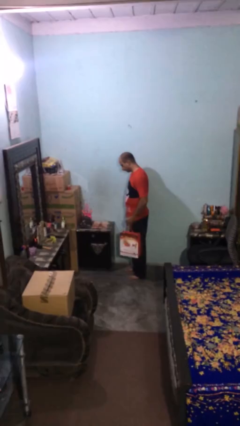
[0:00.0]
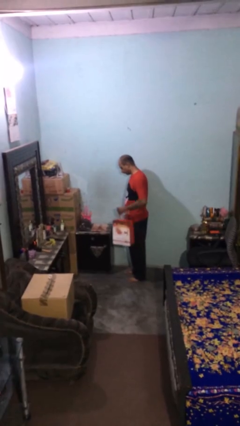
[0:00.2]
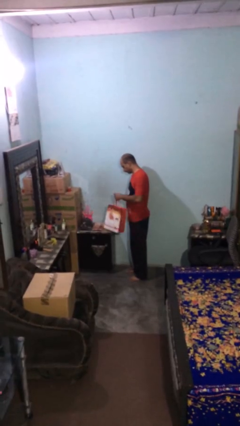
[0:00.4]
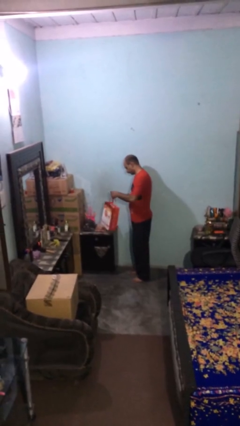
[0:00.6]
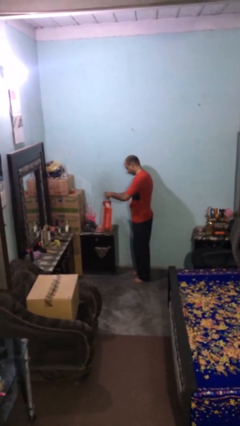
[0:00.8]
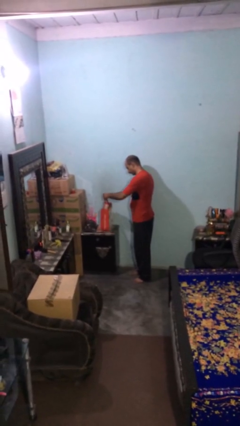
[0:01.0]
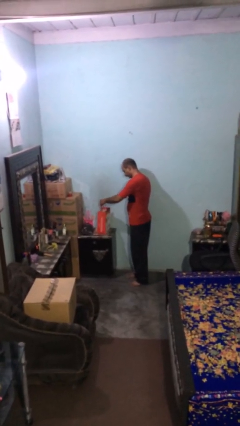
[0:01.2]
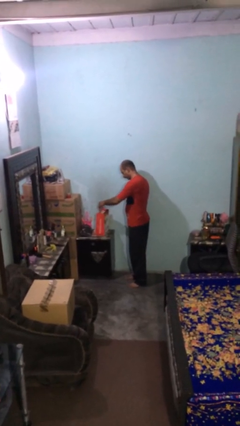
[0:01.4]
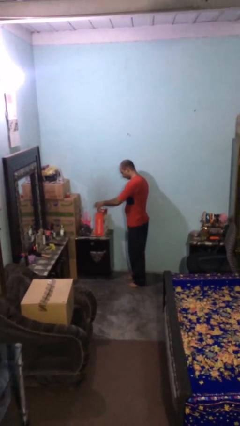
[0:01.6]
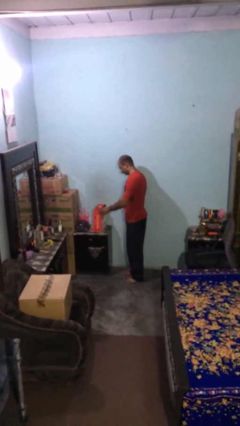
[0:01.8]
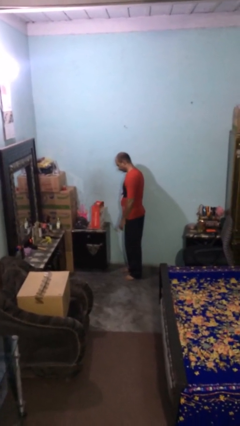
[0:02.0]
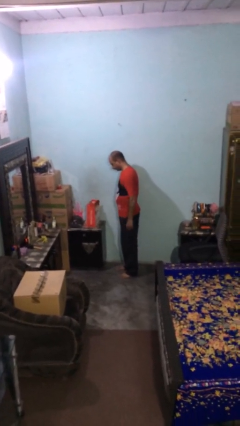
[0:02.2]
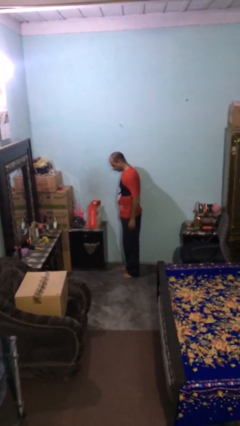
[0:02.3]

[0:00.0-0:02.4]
person puts down object on table

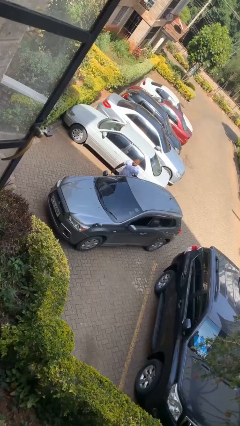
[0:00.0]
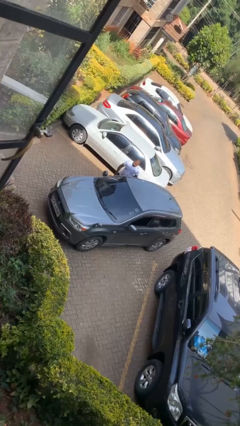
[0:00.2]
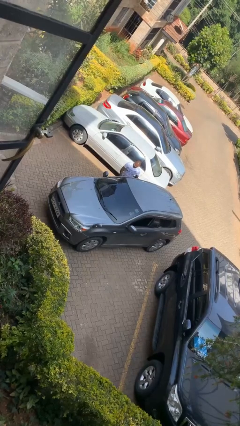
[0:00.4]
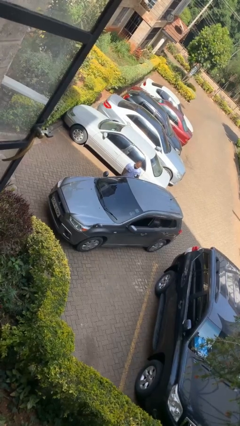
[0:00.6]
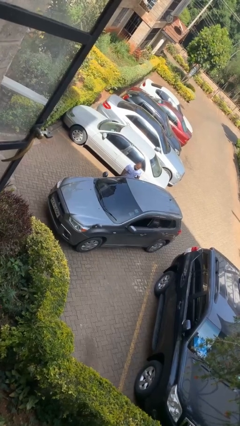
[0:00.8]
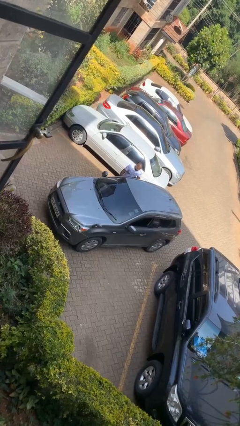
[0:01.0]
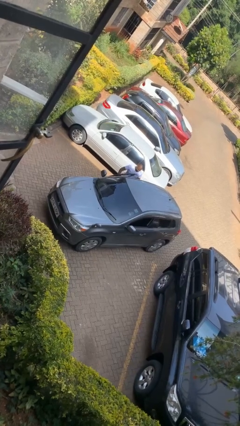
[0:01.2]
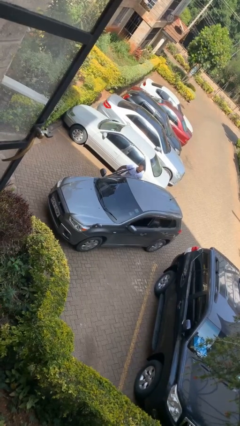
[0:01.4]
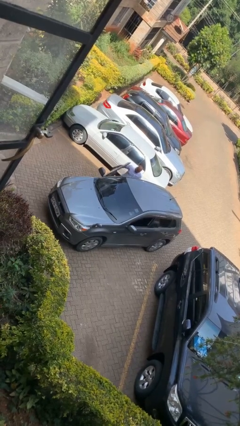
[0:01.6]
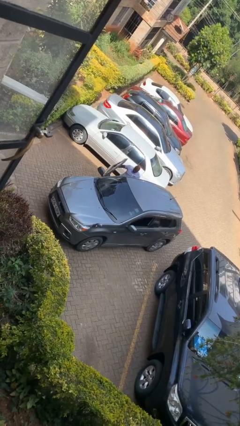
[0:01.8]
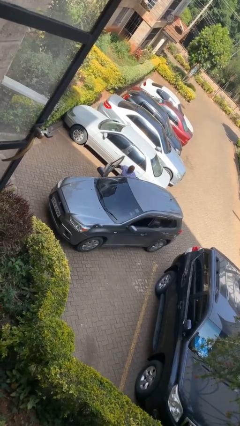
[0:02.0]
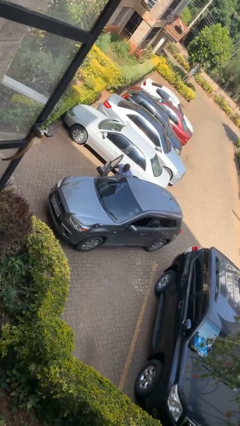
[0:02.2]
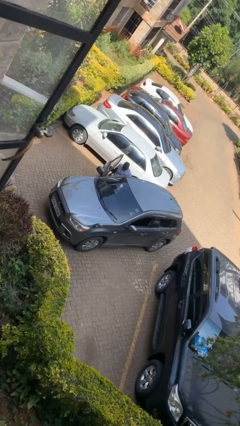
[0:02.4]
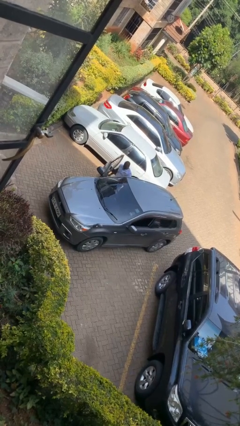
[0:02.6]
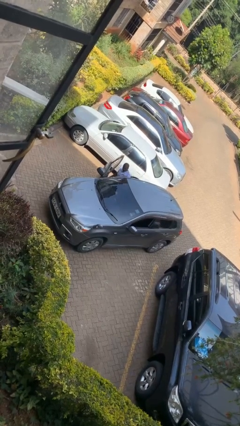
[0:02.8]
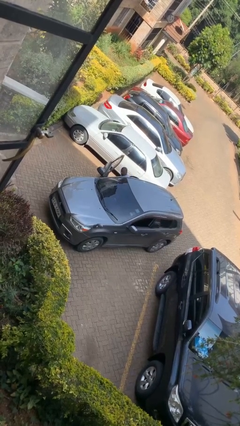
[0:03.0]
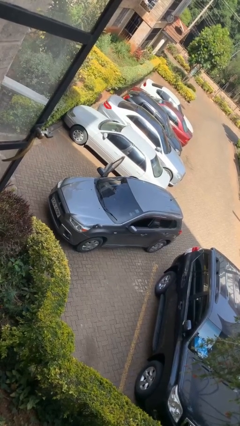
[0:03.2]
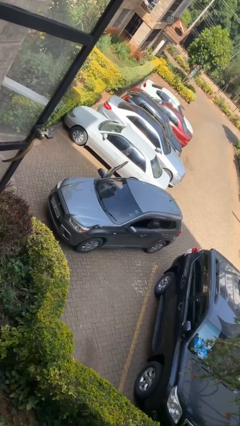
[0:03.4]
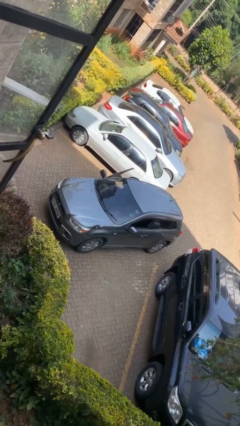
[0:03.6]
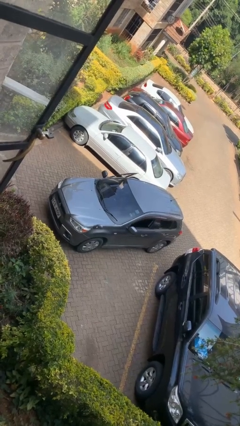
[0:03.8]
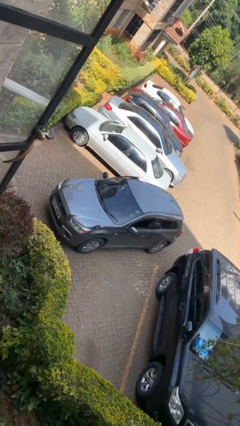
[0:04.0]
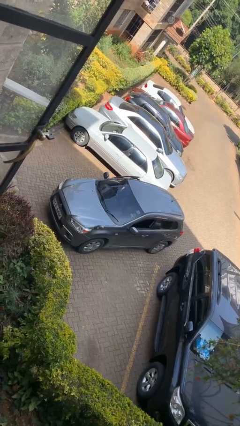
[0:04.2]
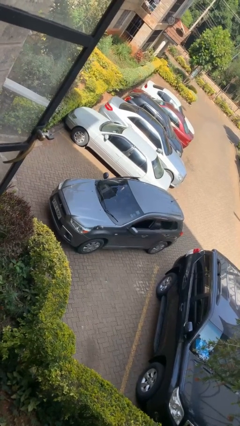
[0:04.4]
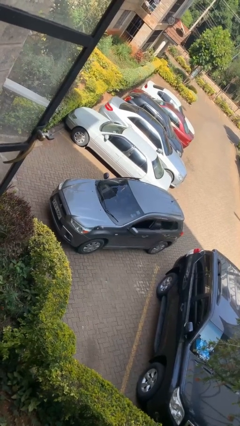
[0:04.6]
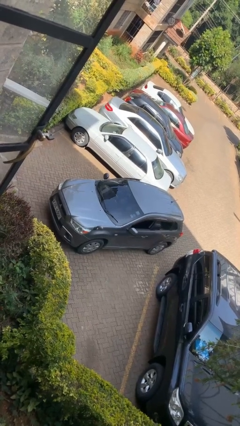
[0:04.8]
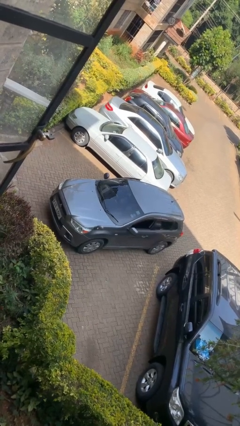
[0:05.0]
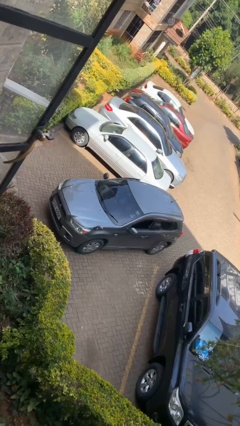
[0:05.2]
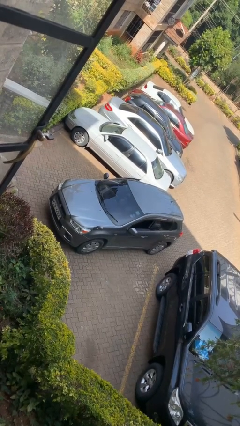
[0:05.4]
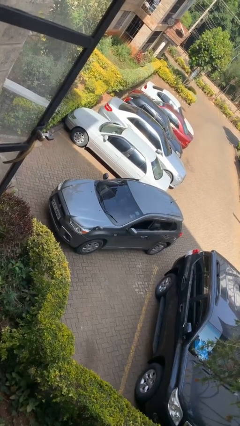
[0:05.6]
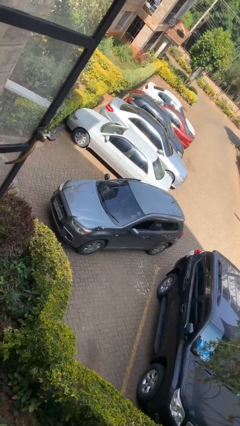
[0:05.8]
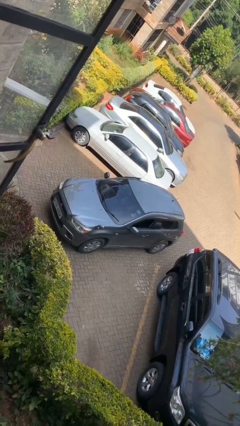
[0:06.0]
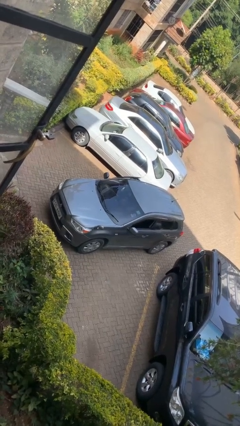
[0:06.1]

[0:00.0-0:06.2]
car picks up person

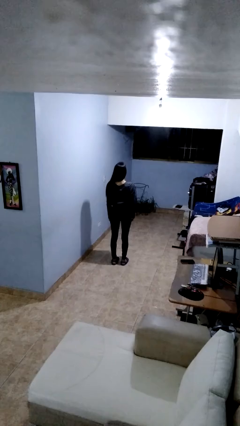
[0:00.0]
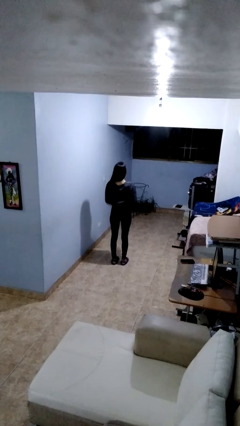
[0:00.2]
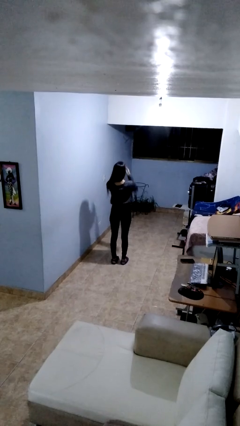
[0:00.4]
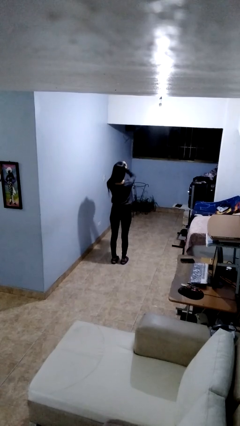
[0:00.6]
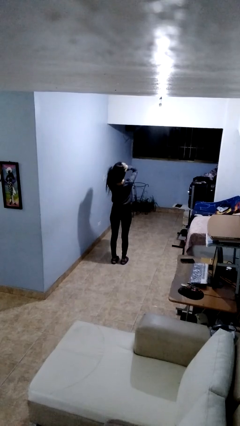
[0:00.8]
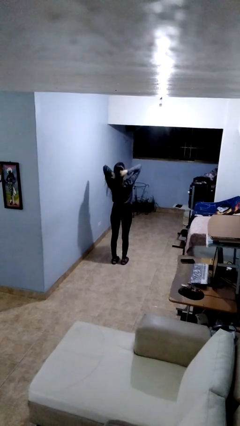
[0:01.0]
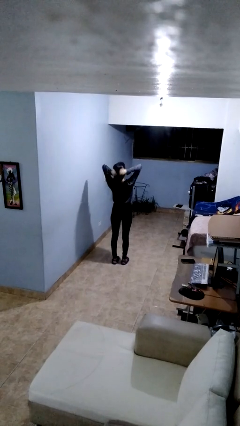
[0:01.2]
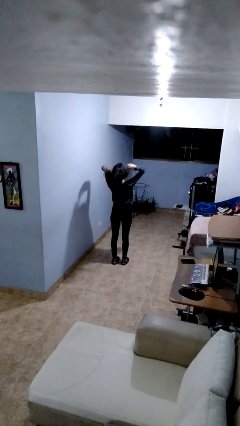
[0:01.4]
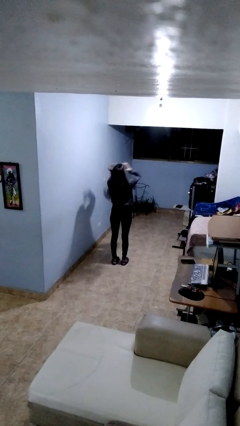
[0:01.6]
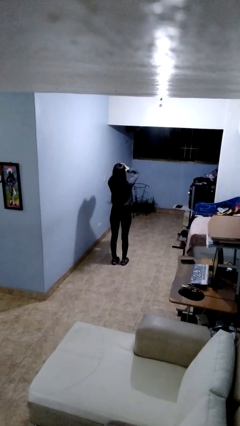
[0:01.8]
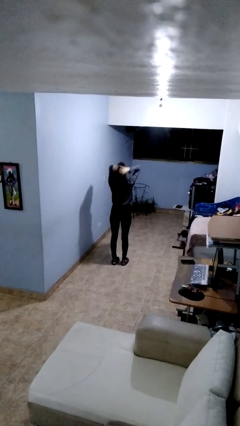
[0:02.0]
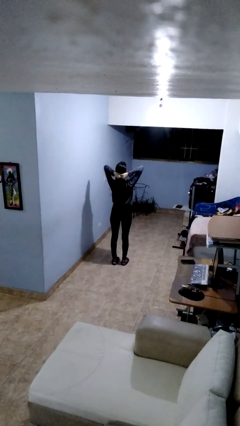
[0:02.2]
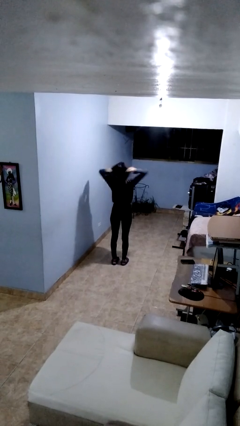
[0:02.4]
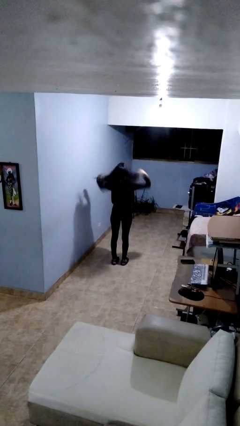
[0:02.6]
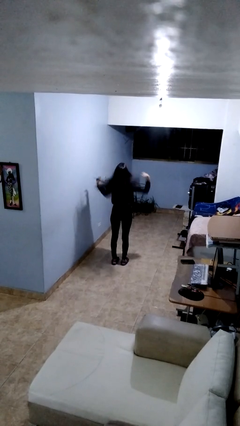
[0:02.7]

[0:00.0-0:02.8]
person strokes hair

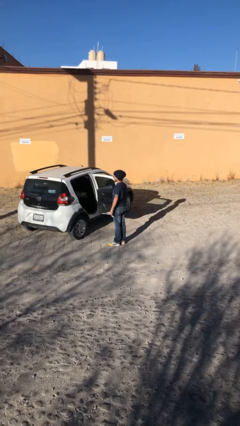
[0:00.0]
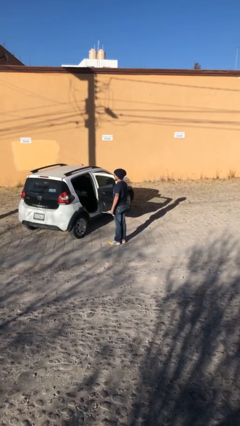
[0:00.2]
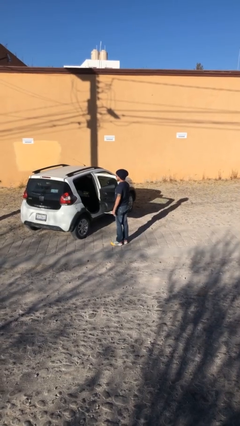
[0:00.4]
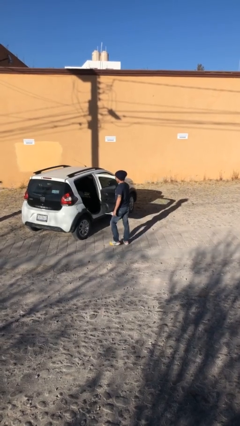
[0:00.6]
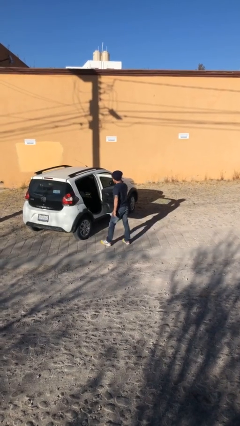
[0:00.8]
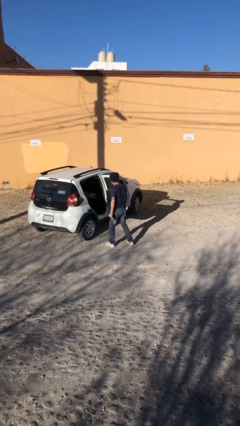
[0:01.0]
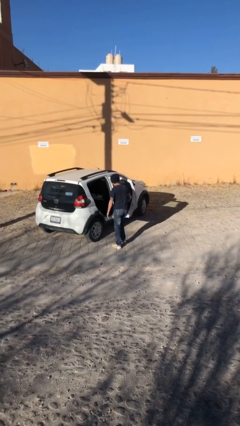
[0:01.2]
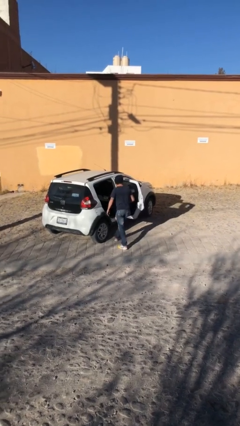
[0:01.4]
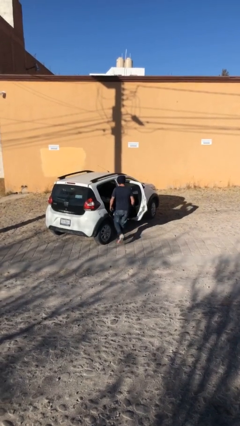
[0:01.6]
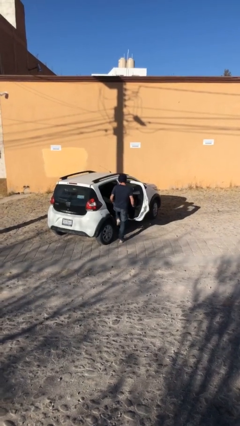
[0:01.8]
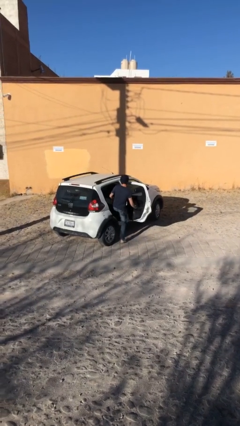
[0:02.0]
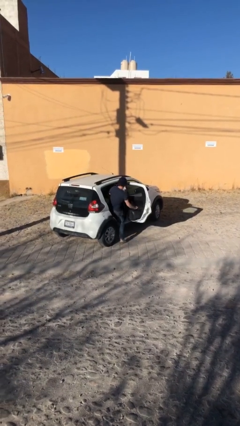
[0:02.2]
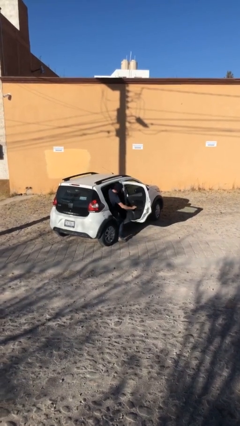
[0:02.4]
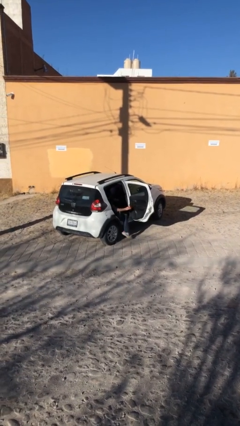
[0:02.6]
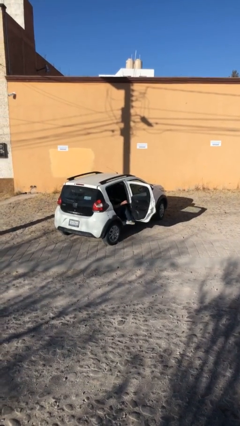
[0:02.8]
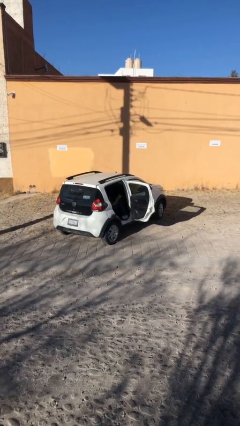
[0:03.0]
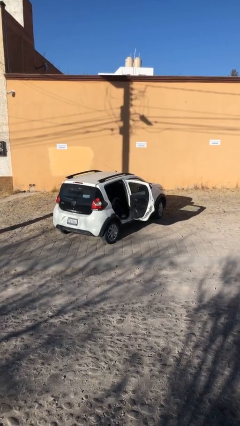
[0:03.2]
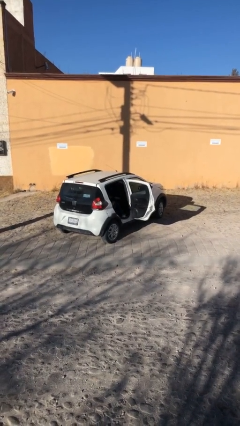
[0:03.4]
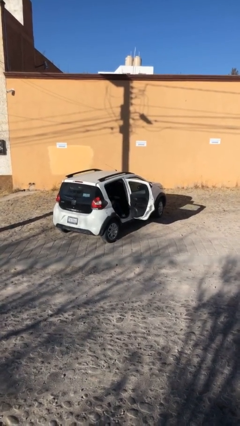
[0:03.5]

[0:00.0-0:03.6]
person enters car

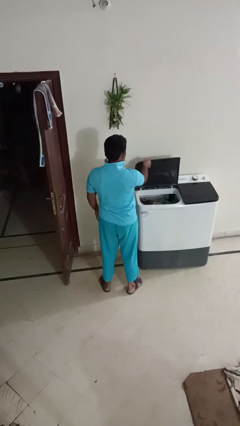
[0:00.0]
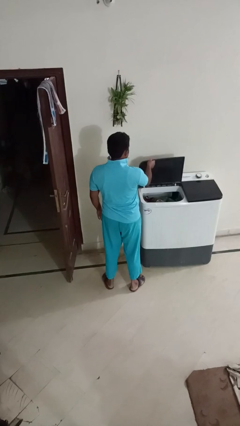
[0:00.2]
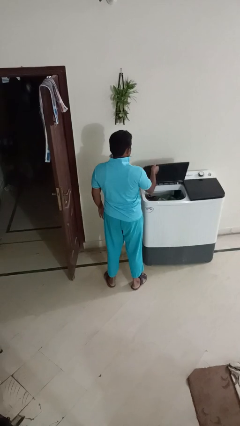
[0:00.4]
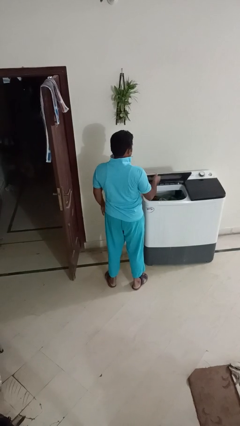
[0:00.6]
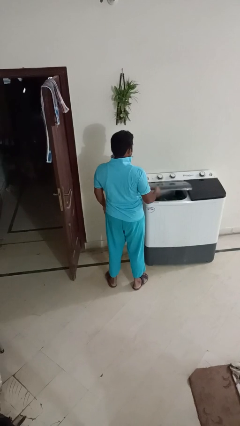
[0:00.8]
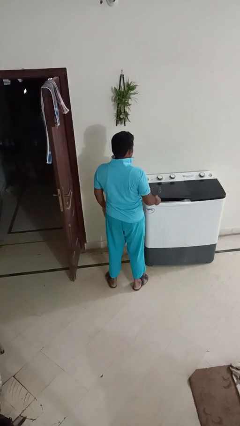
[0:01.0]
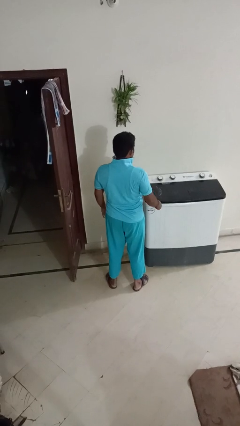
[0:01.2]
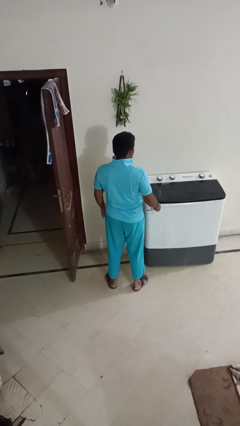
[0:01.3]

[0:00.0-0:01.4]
person closes clothes washer

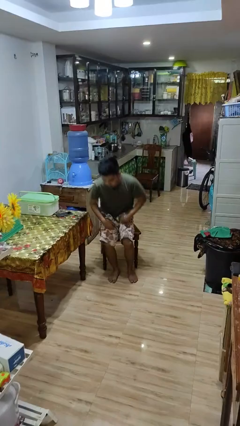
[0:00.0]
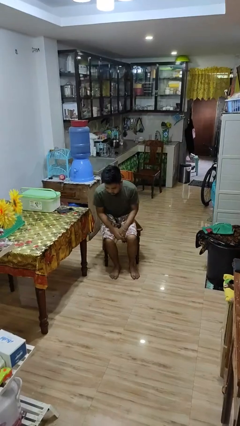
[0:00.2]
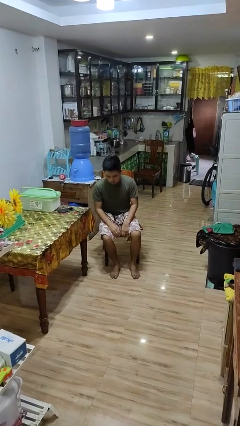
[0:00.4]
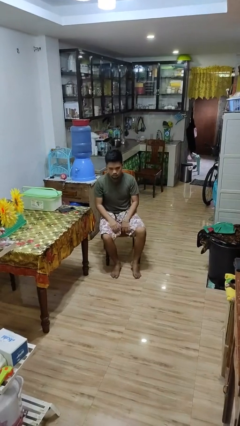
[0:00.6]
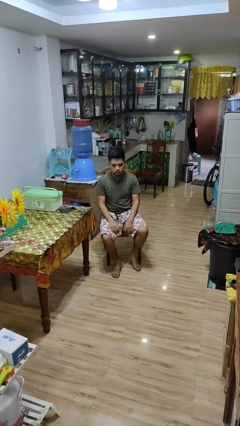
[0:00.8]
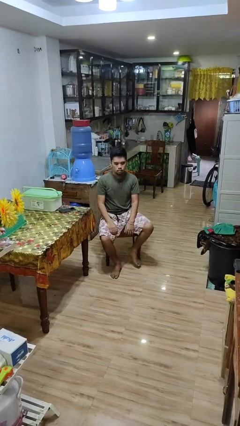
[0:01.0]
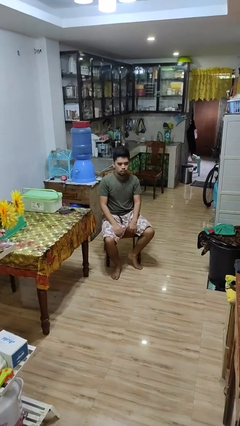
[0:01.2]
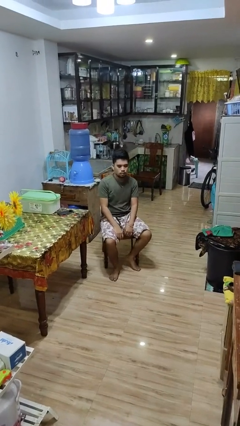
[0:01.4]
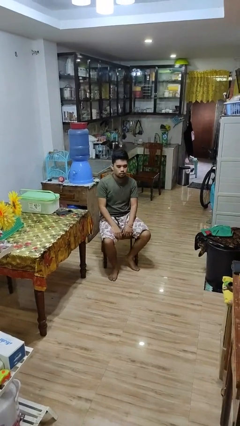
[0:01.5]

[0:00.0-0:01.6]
person sits down
